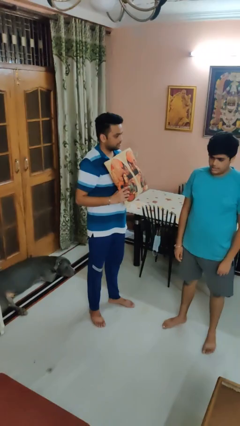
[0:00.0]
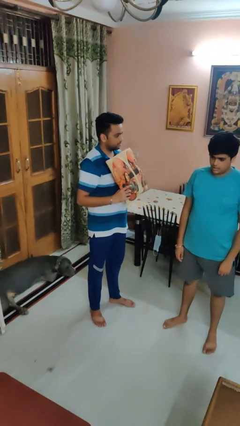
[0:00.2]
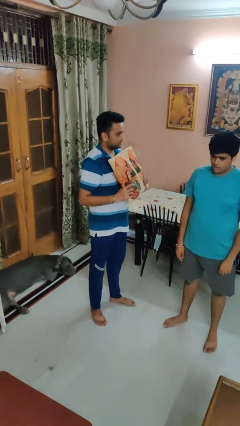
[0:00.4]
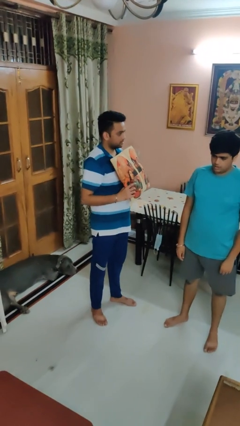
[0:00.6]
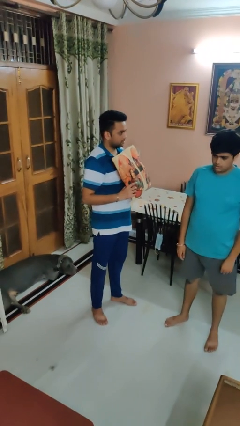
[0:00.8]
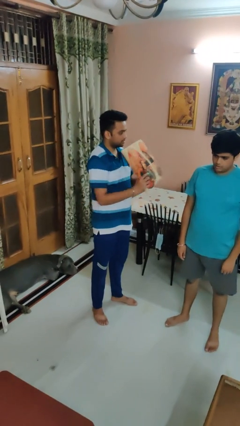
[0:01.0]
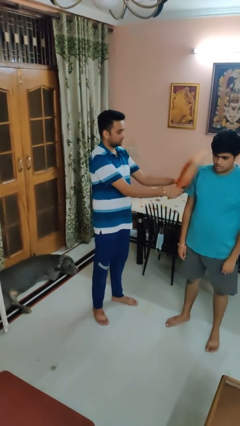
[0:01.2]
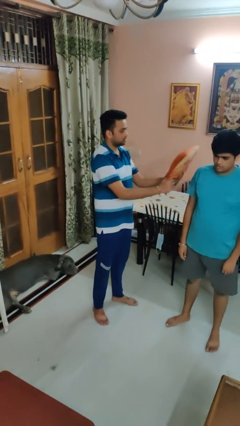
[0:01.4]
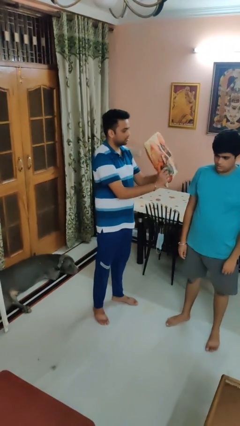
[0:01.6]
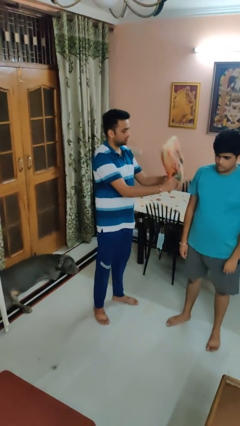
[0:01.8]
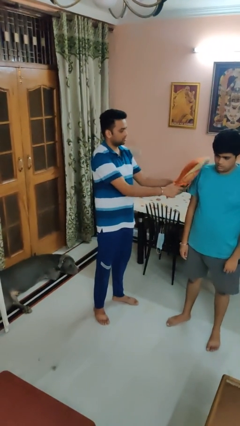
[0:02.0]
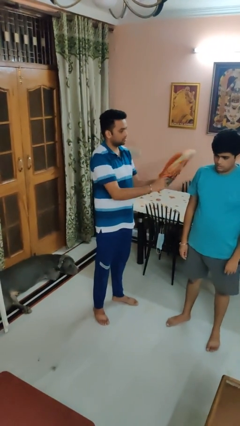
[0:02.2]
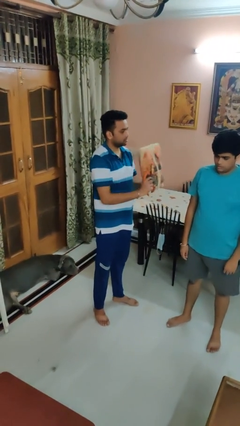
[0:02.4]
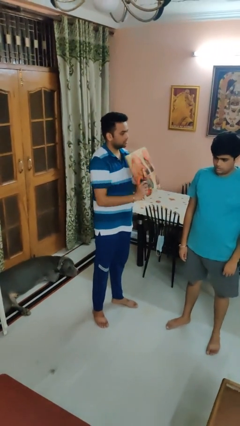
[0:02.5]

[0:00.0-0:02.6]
person hits person with pillow

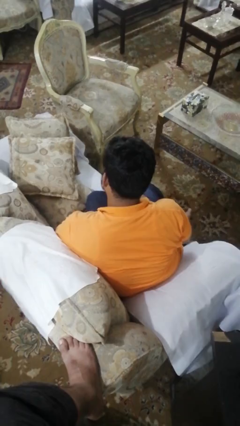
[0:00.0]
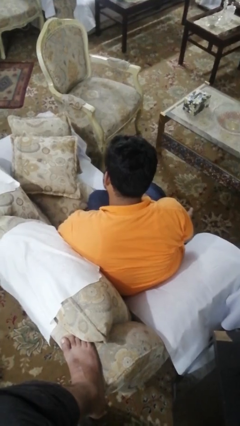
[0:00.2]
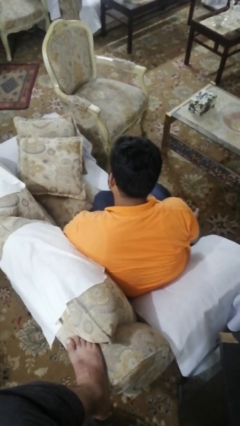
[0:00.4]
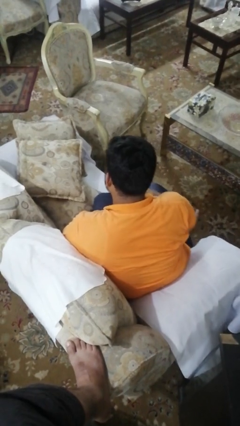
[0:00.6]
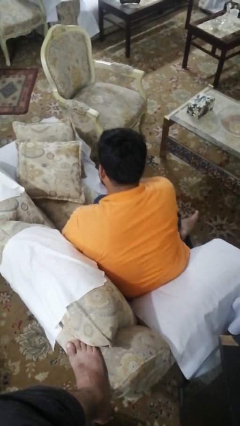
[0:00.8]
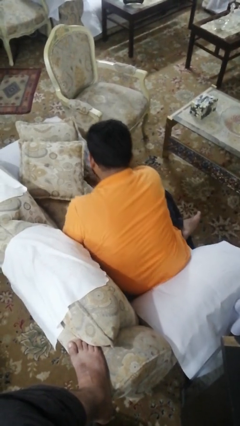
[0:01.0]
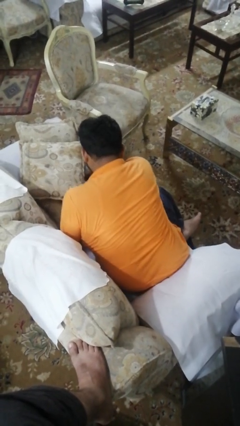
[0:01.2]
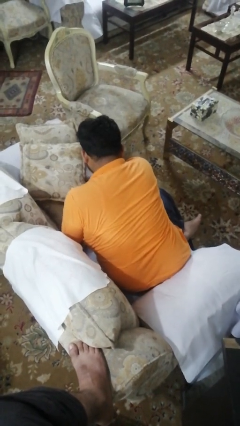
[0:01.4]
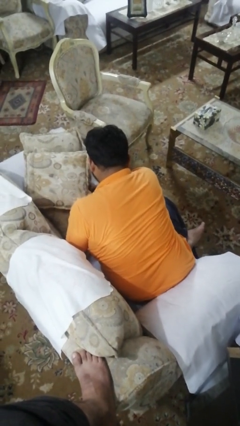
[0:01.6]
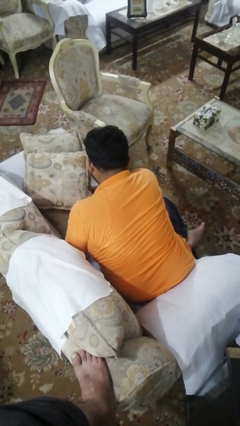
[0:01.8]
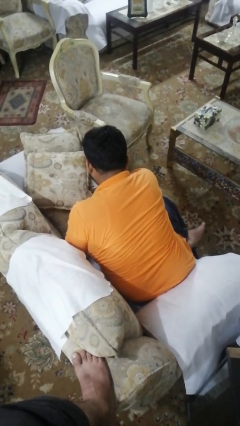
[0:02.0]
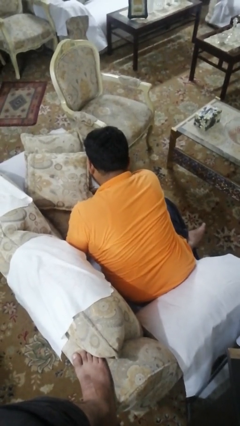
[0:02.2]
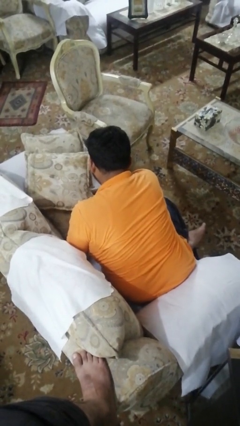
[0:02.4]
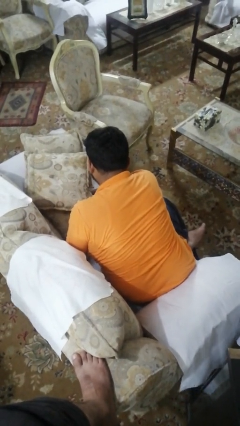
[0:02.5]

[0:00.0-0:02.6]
person searches in couch

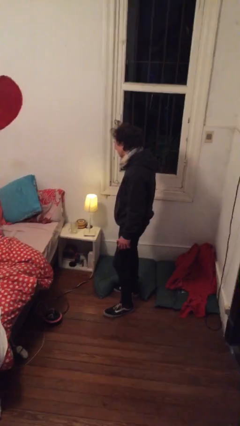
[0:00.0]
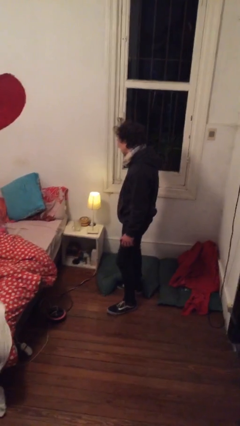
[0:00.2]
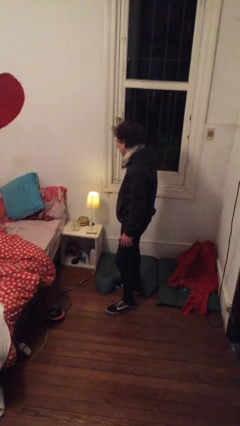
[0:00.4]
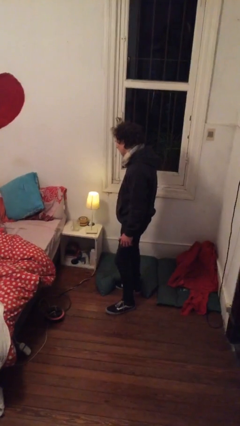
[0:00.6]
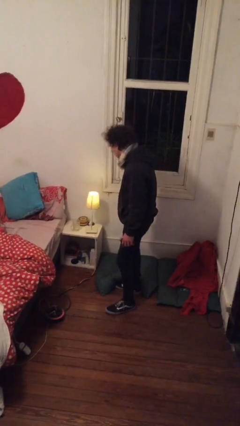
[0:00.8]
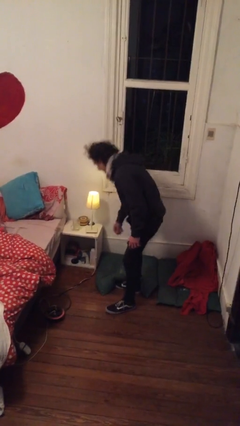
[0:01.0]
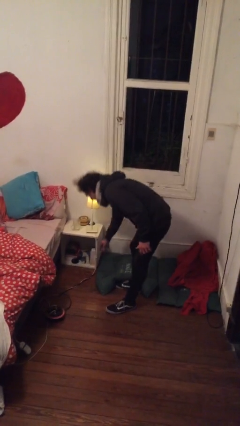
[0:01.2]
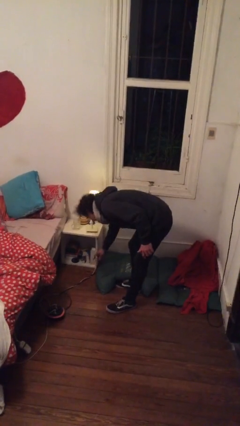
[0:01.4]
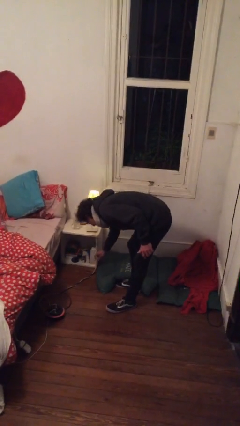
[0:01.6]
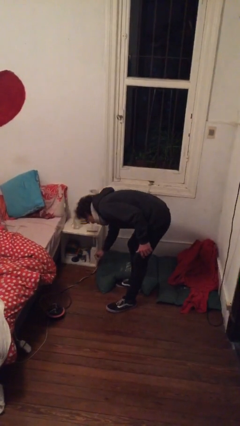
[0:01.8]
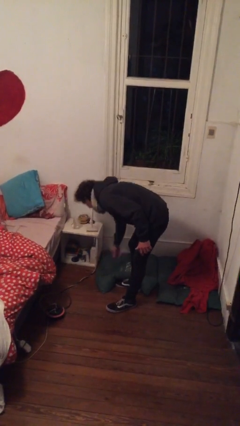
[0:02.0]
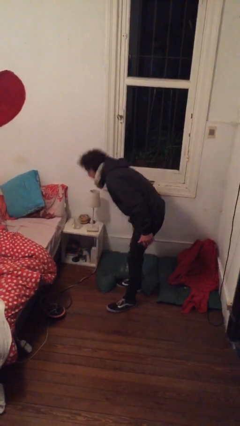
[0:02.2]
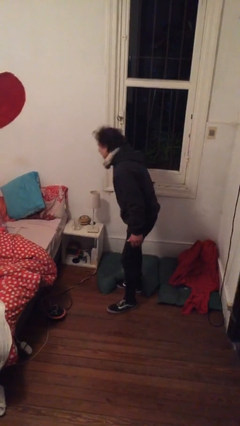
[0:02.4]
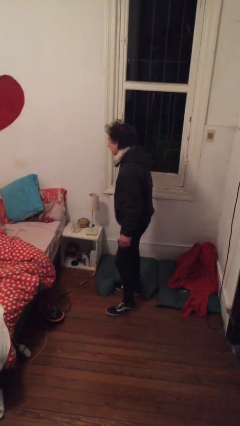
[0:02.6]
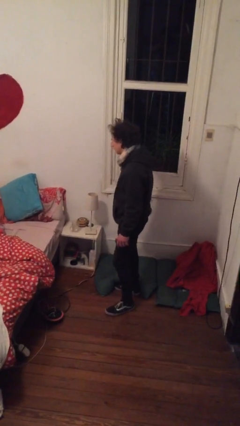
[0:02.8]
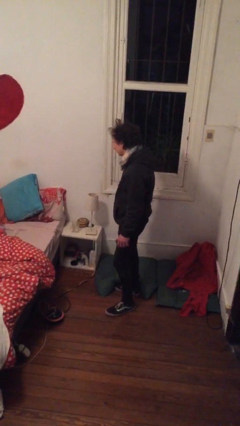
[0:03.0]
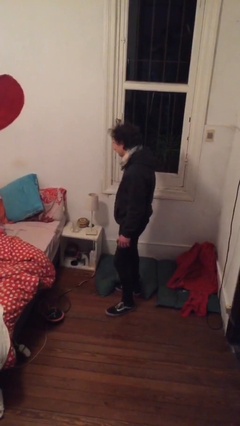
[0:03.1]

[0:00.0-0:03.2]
person turns off lamp

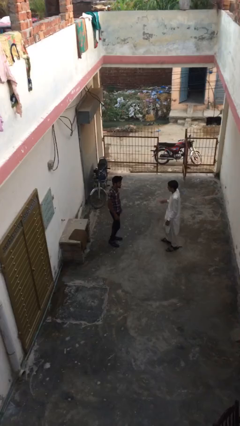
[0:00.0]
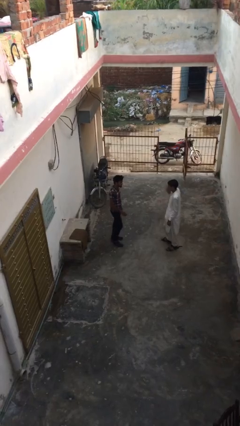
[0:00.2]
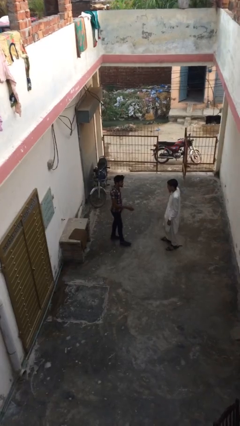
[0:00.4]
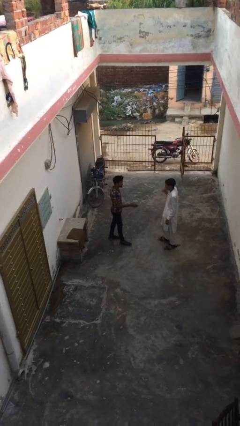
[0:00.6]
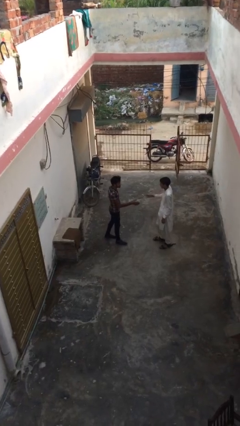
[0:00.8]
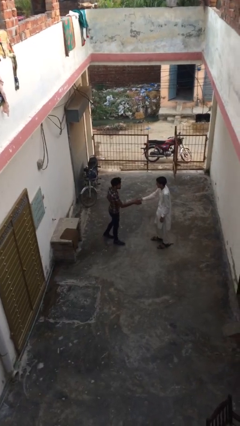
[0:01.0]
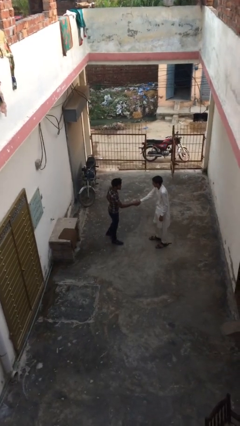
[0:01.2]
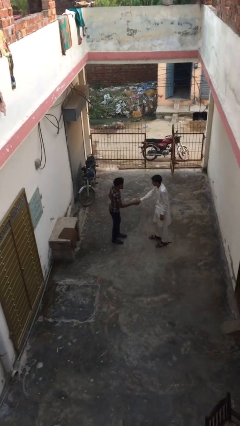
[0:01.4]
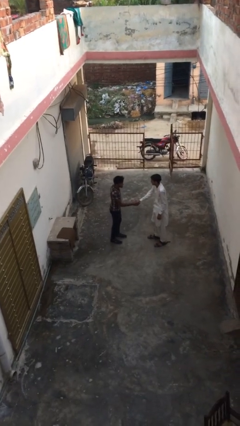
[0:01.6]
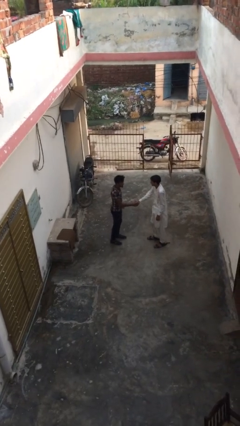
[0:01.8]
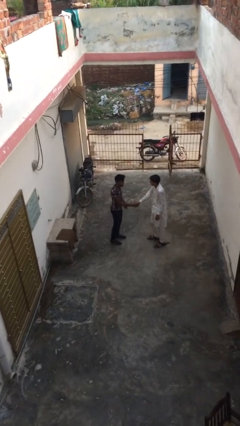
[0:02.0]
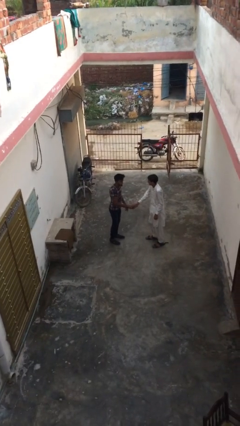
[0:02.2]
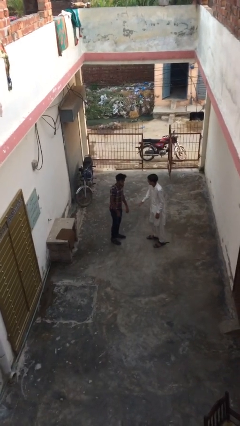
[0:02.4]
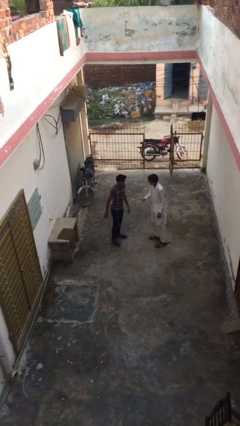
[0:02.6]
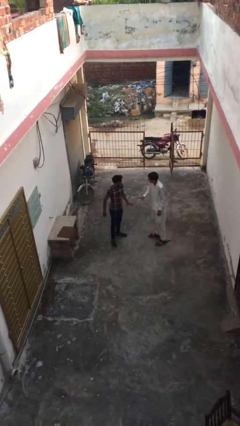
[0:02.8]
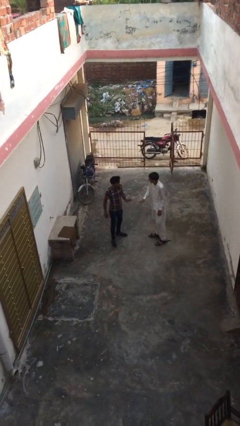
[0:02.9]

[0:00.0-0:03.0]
person shakes hand

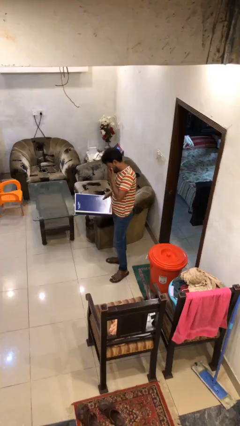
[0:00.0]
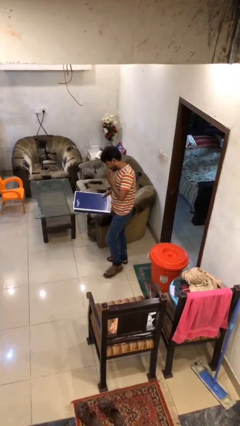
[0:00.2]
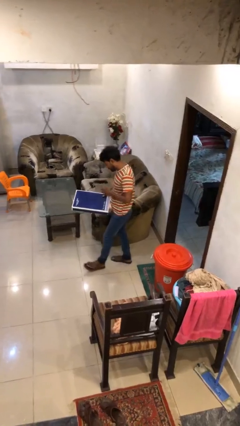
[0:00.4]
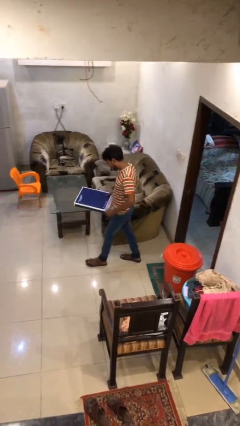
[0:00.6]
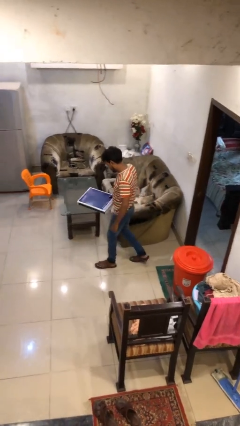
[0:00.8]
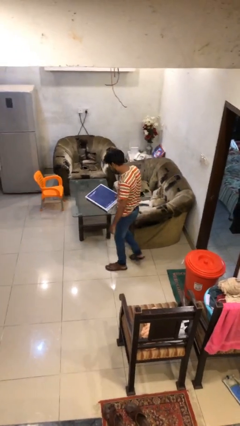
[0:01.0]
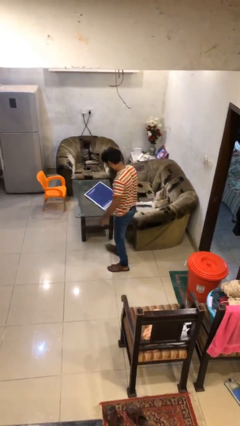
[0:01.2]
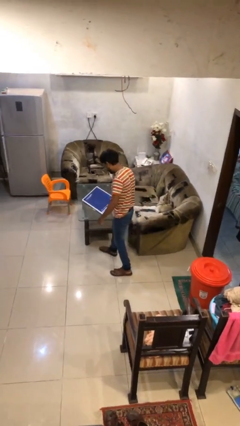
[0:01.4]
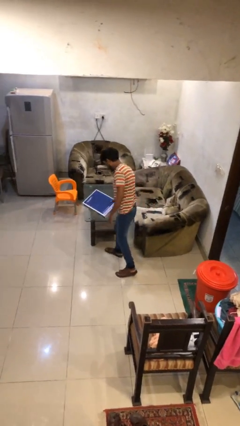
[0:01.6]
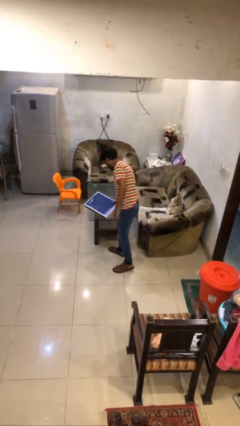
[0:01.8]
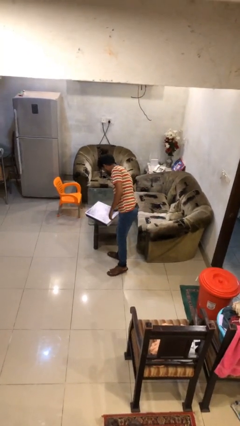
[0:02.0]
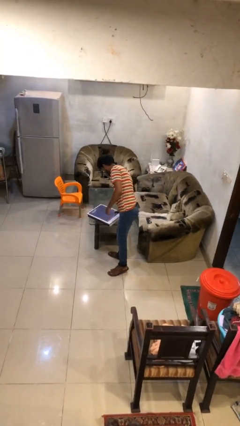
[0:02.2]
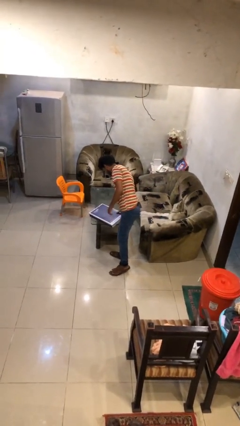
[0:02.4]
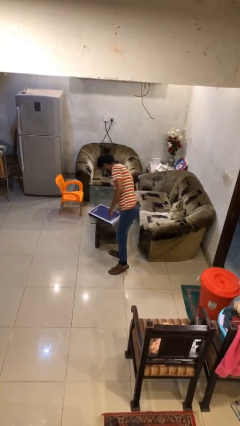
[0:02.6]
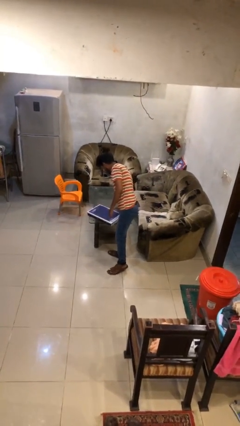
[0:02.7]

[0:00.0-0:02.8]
person puts down object on table

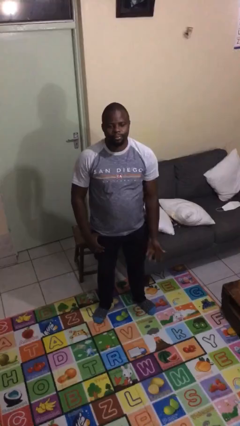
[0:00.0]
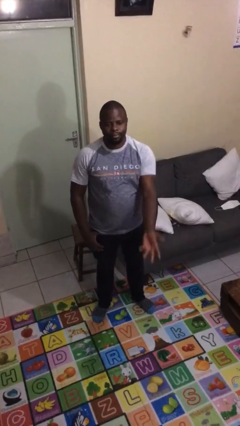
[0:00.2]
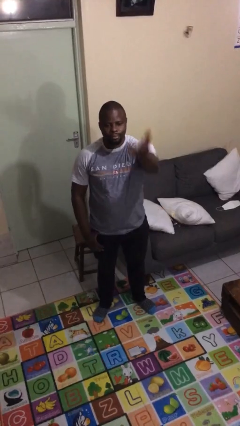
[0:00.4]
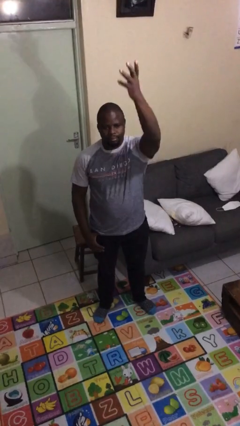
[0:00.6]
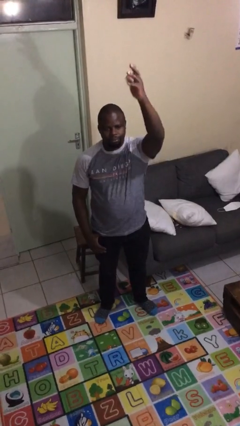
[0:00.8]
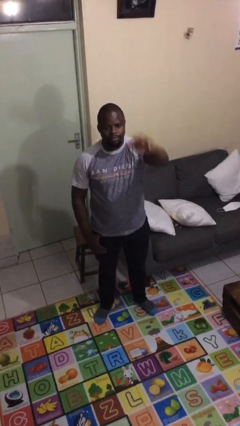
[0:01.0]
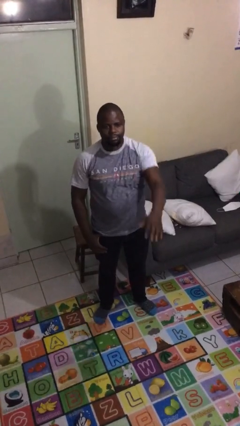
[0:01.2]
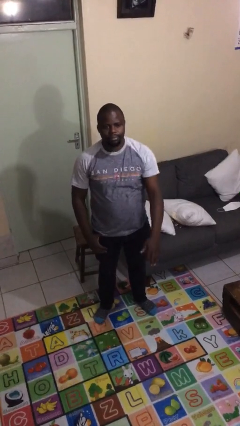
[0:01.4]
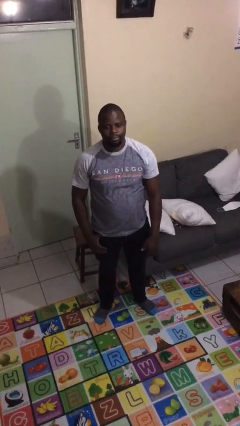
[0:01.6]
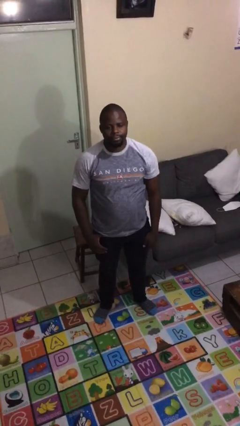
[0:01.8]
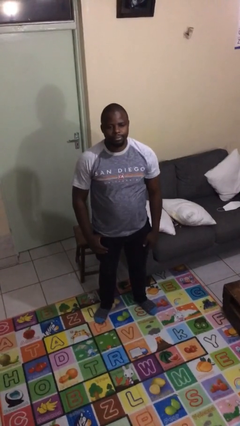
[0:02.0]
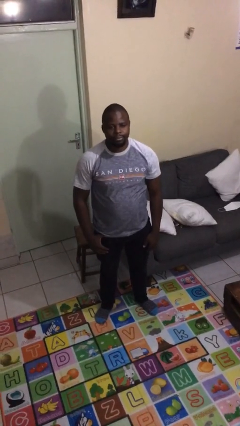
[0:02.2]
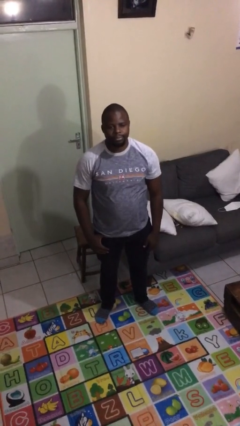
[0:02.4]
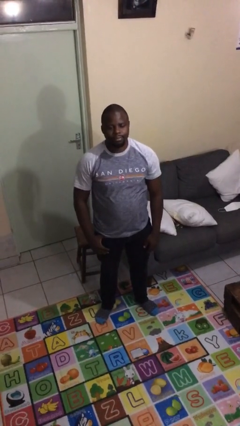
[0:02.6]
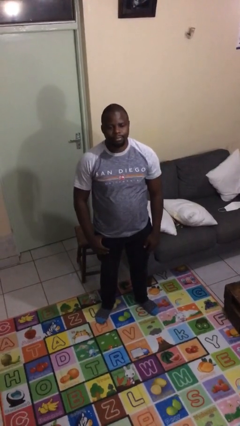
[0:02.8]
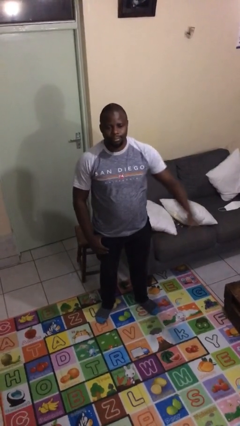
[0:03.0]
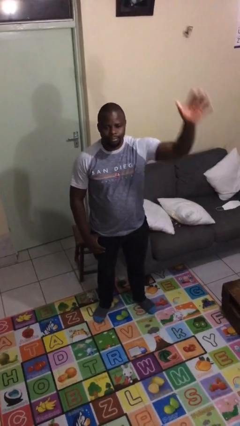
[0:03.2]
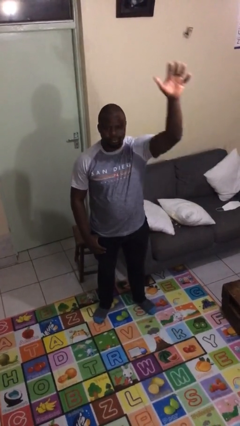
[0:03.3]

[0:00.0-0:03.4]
person gestures swipe up
